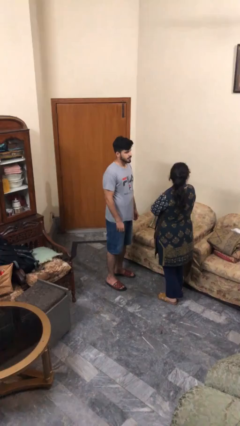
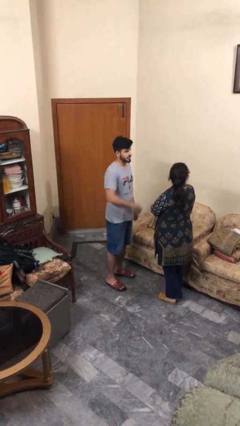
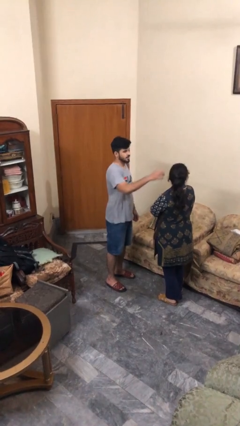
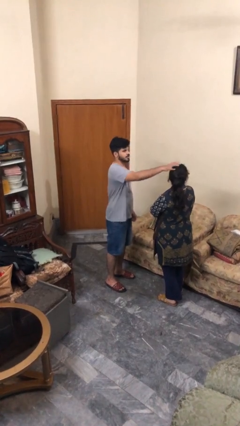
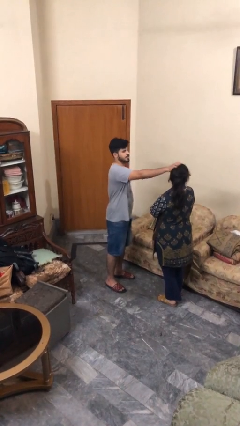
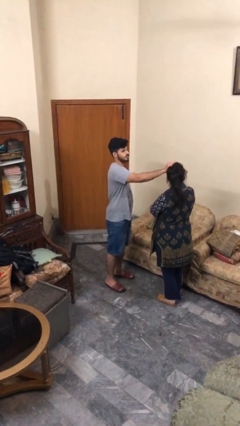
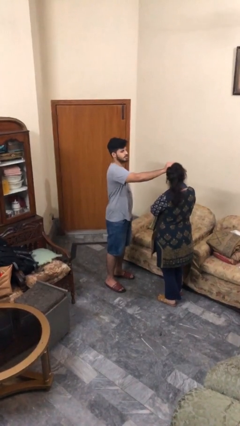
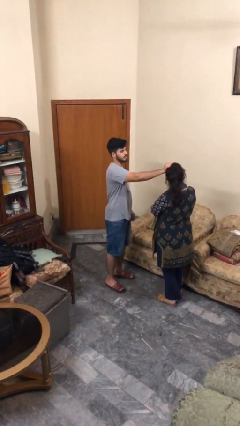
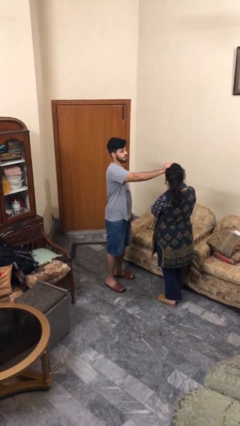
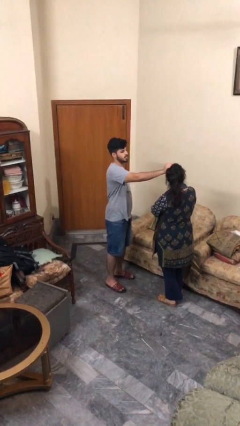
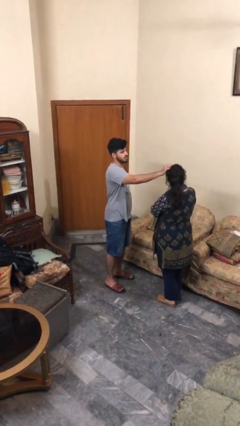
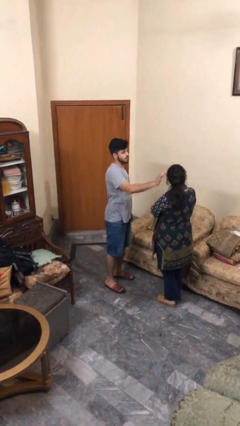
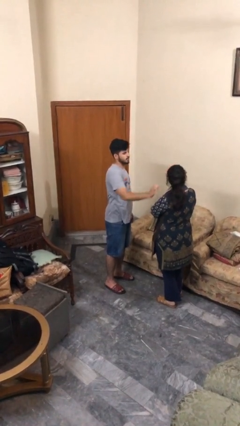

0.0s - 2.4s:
person grabs person by hair

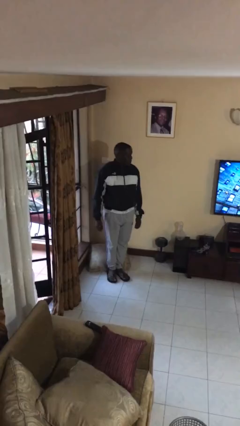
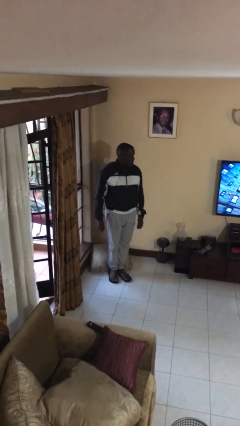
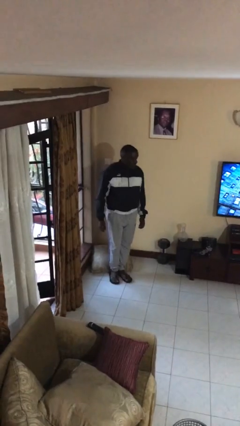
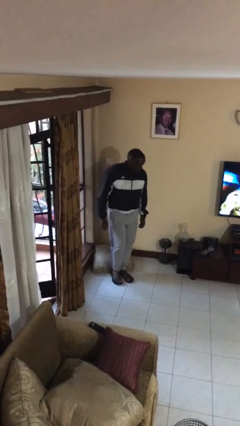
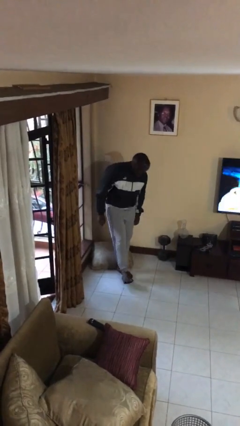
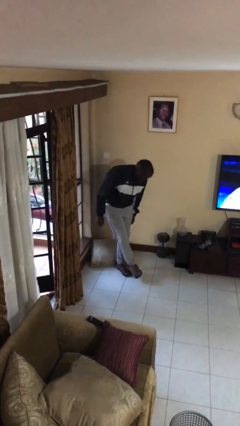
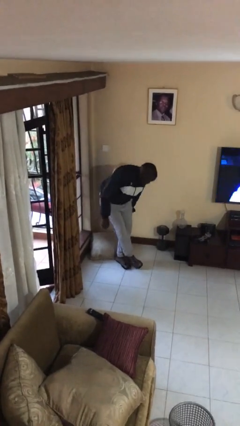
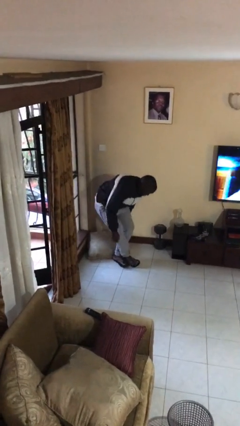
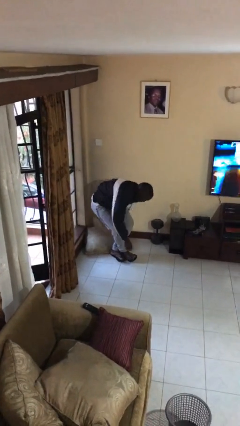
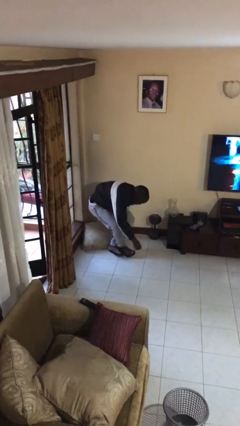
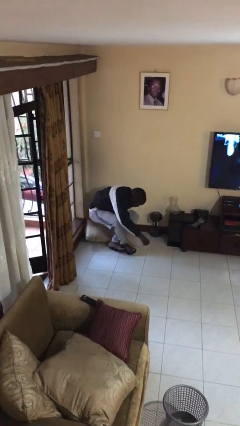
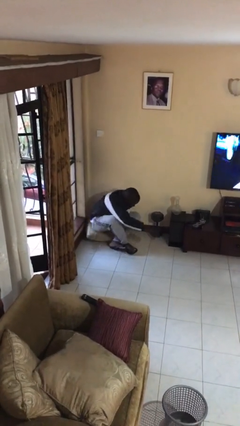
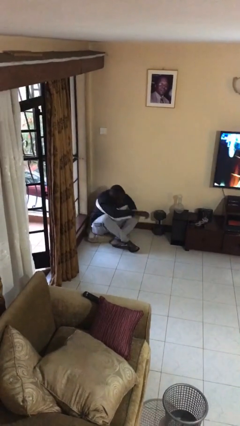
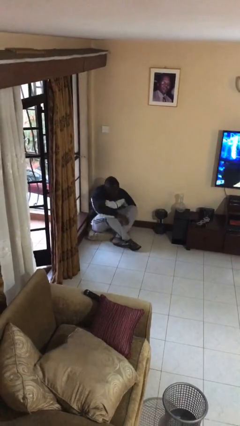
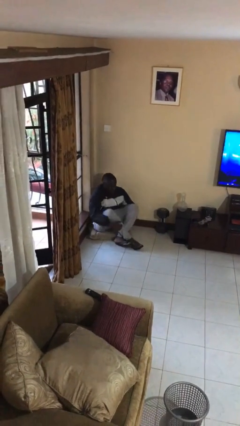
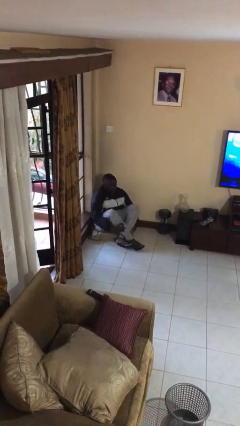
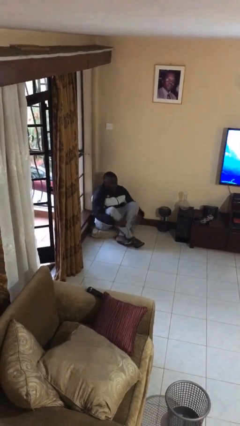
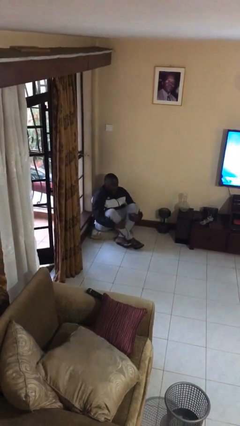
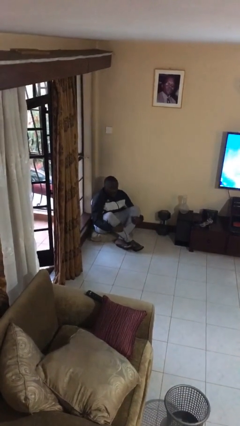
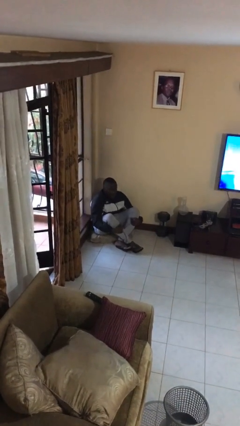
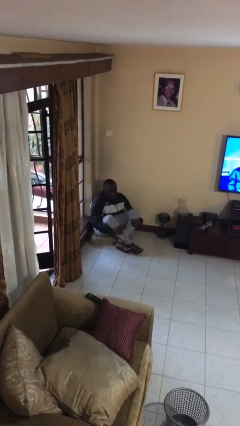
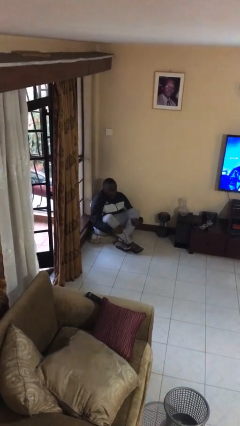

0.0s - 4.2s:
person sits crisscross

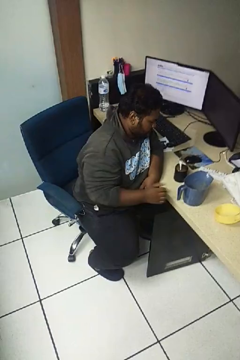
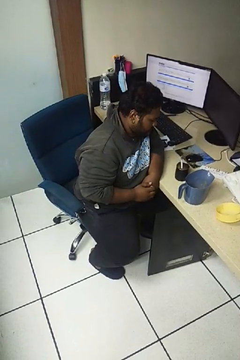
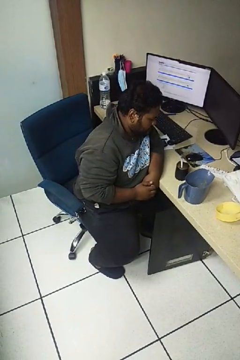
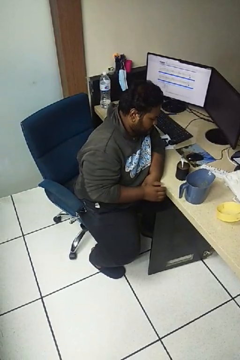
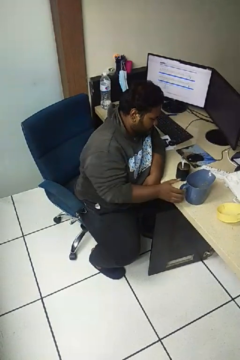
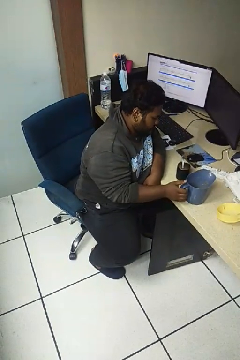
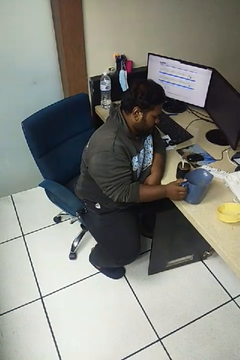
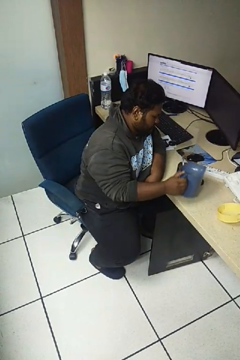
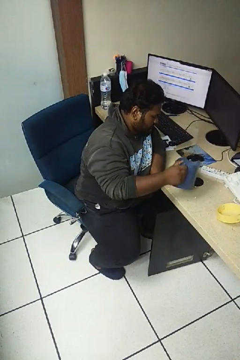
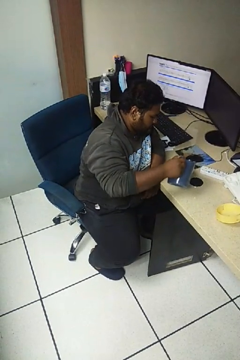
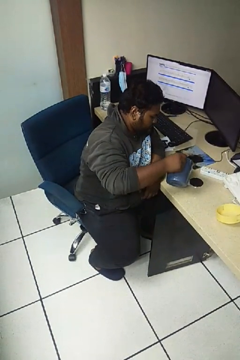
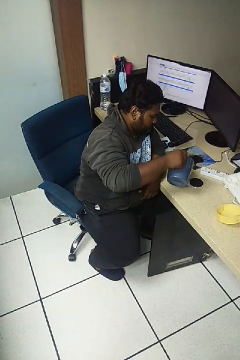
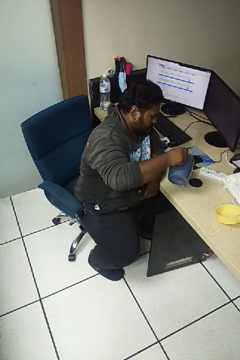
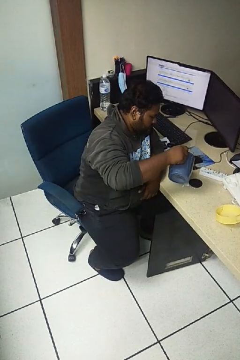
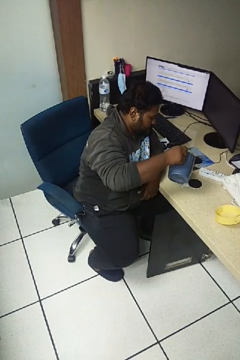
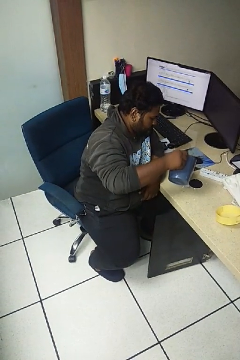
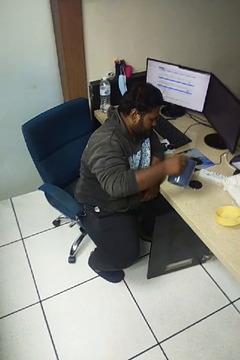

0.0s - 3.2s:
person pours coffee into mug

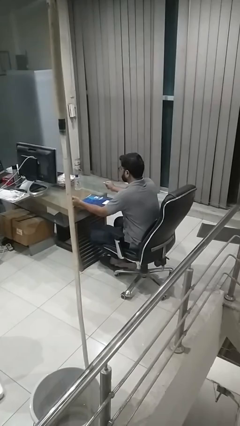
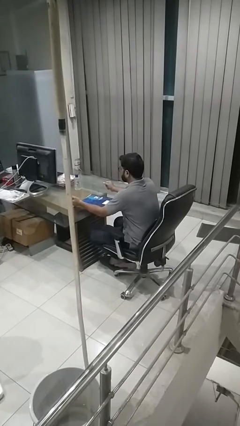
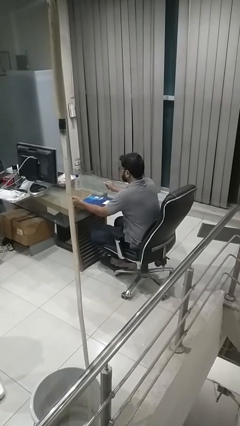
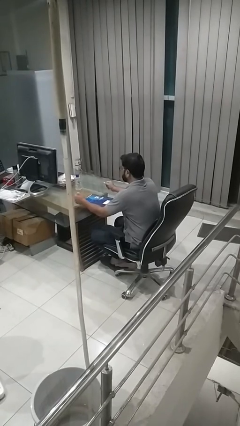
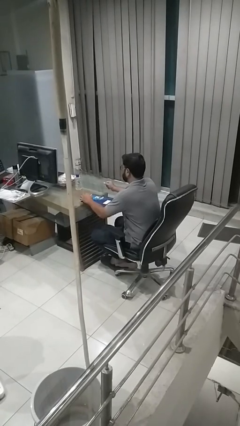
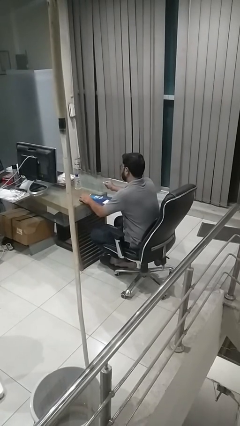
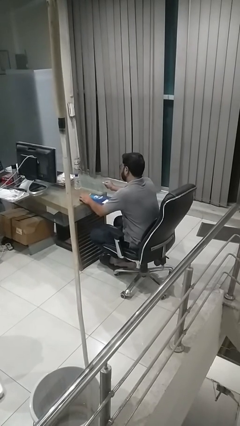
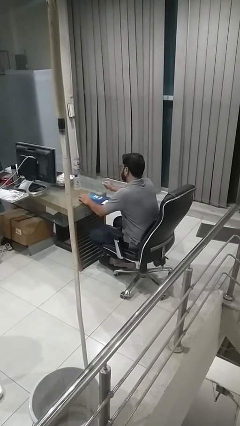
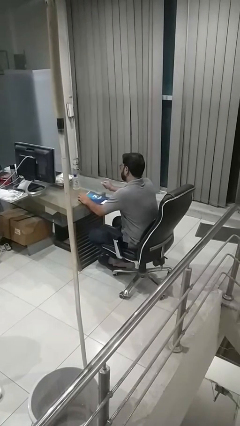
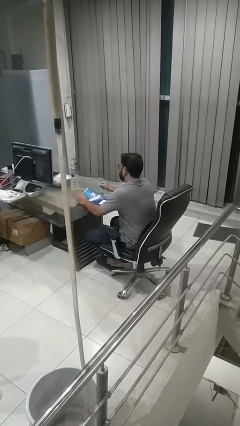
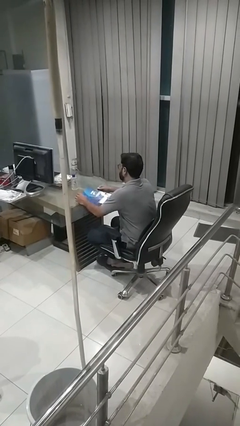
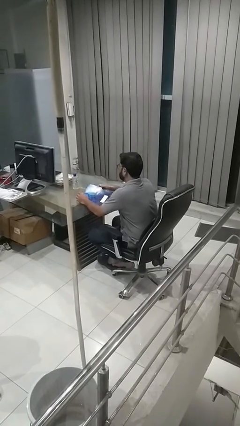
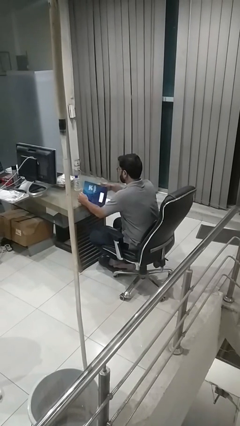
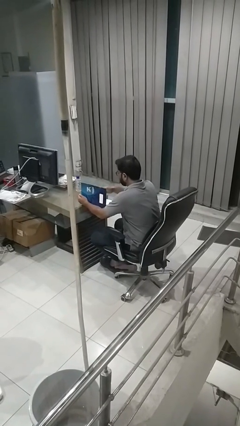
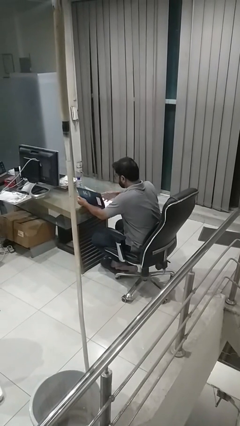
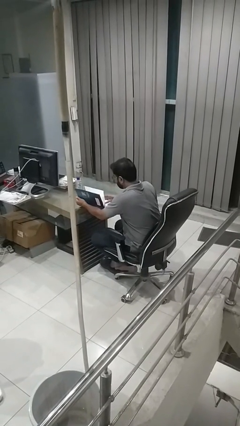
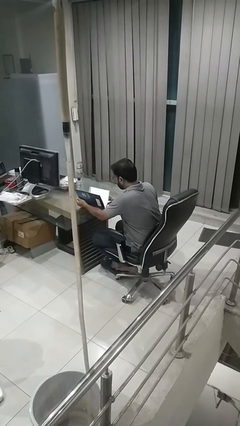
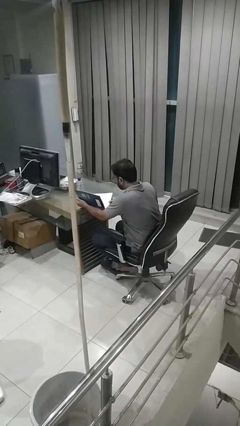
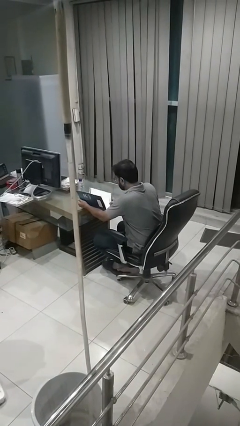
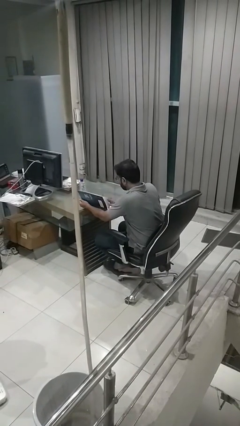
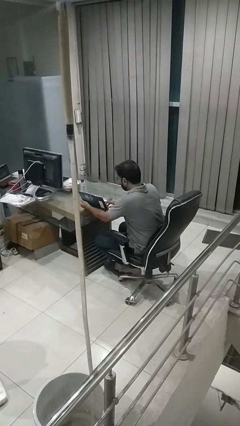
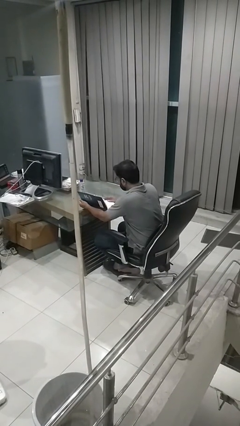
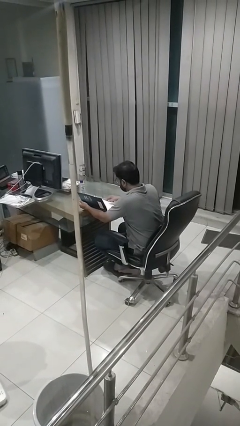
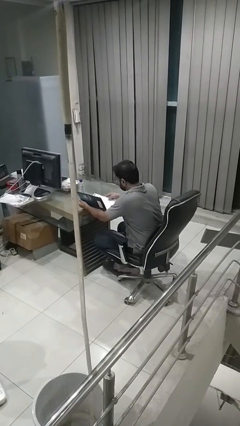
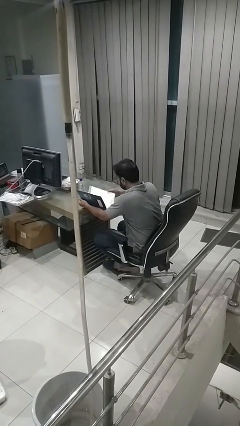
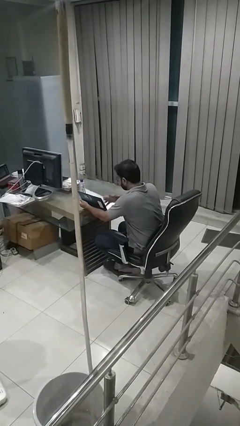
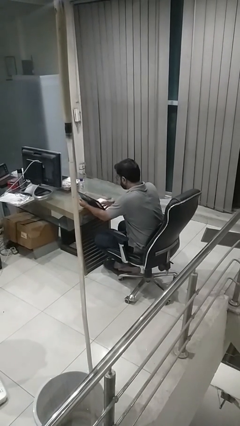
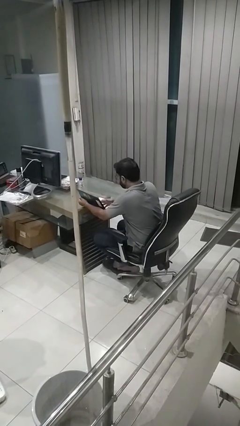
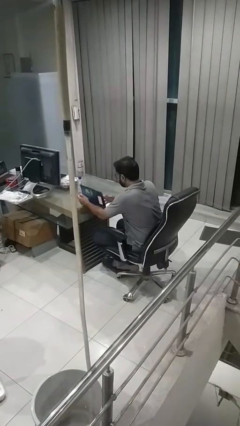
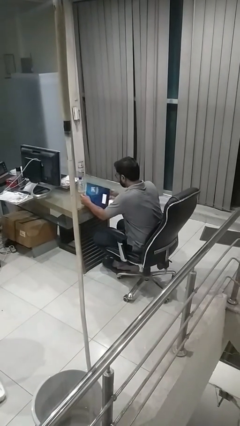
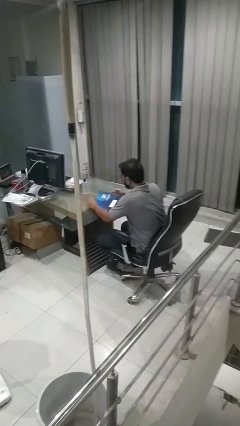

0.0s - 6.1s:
person reads magazine

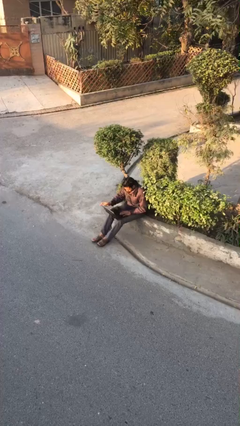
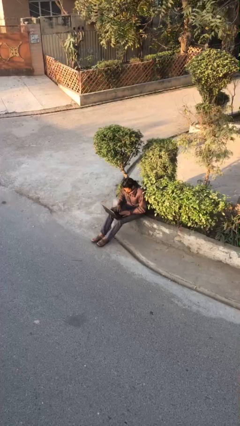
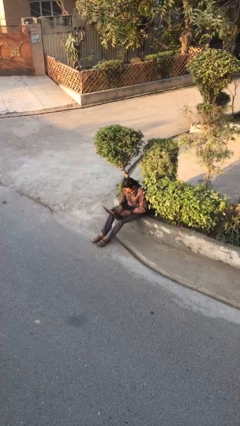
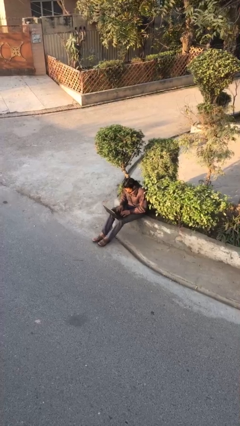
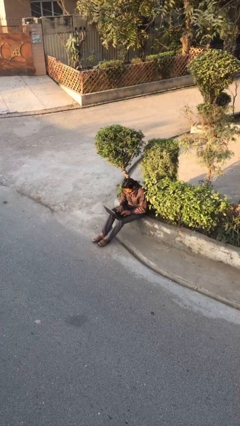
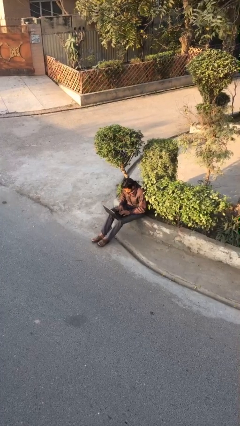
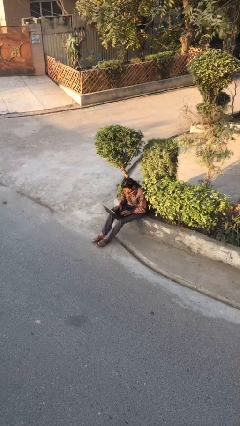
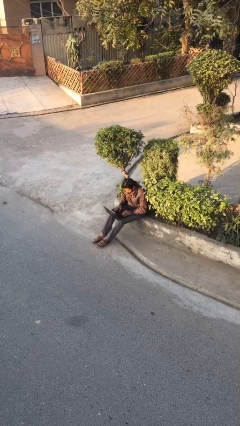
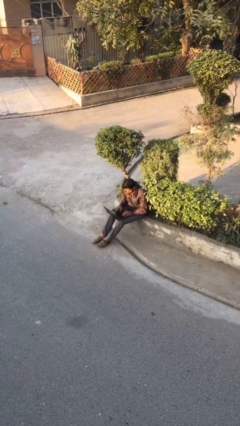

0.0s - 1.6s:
person interacts with laptop

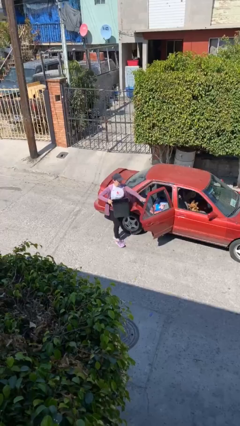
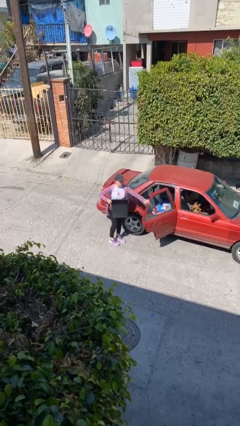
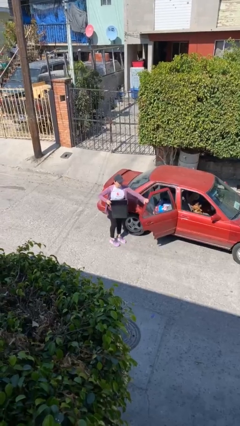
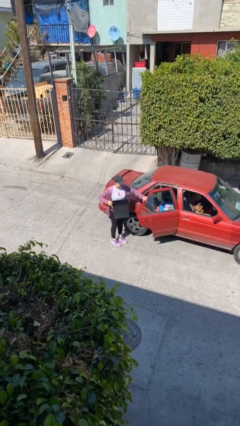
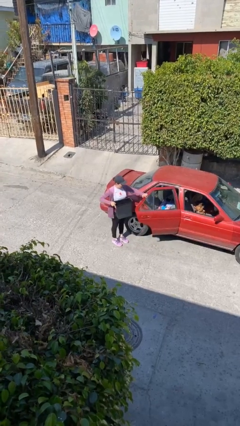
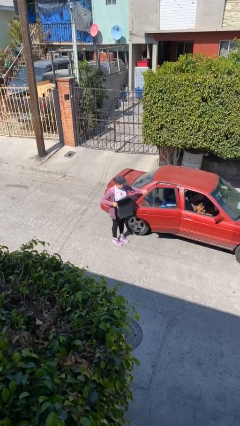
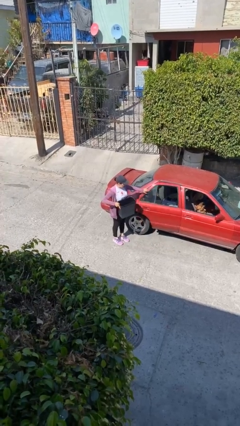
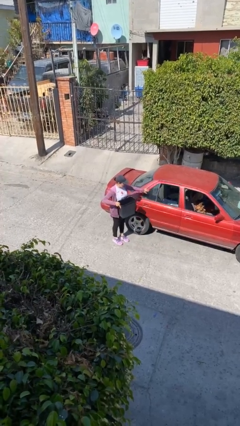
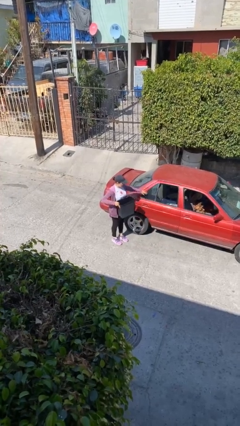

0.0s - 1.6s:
person closes car door
